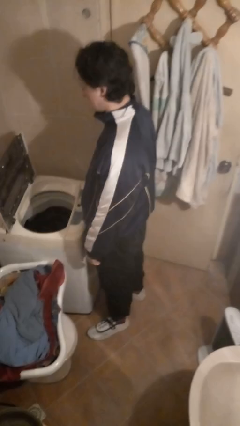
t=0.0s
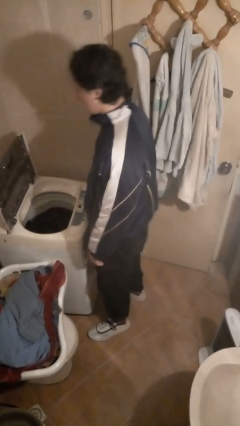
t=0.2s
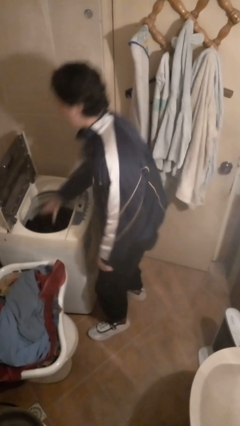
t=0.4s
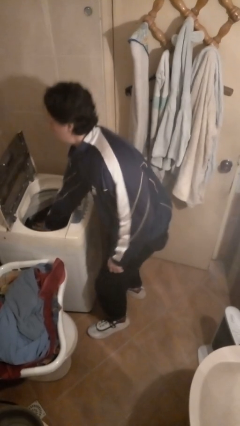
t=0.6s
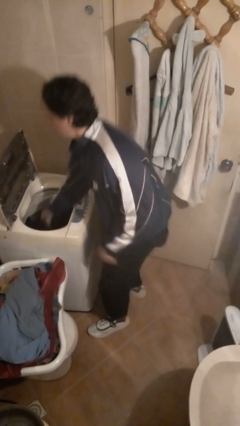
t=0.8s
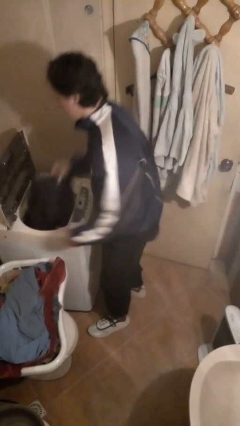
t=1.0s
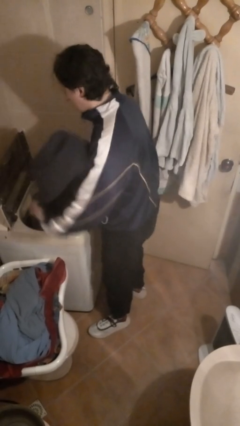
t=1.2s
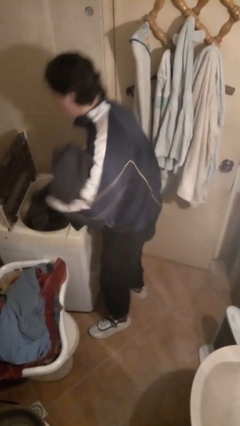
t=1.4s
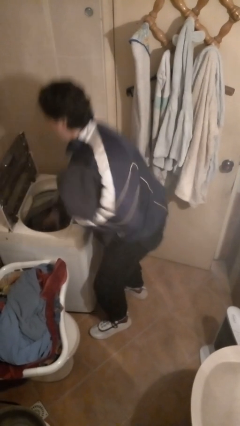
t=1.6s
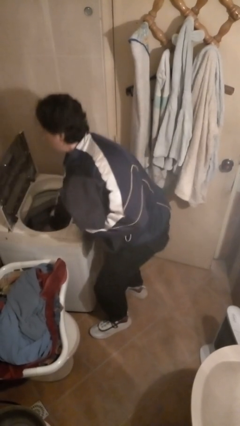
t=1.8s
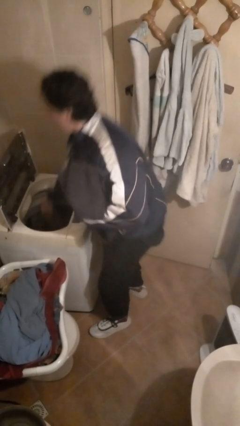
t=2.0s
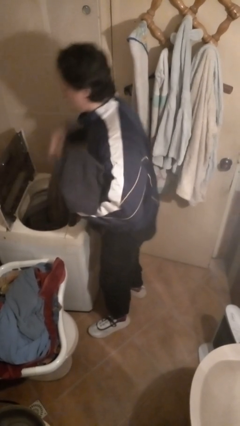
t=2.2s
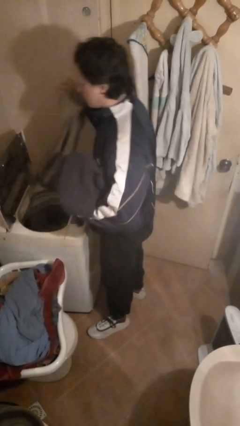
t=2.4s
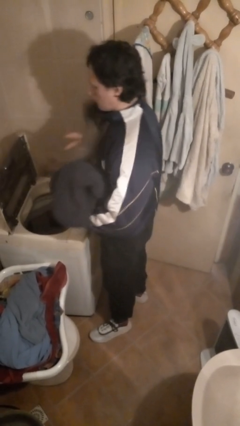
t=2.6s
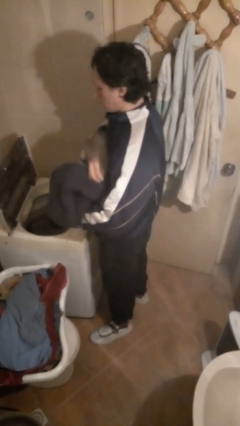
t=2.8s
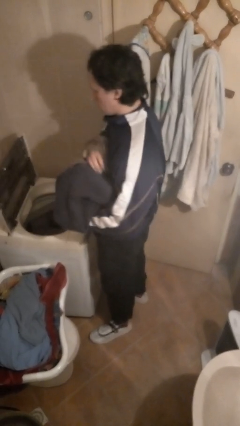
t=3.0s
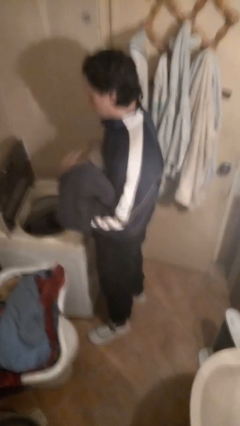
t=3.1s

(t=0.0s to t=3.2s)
person loads clotheswasher

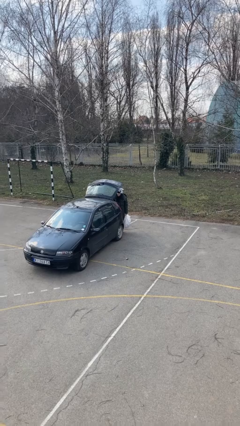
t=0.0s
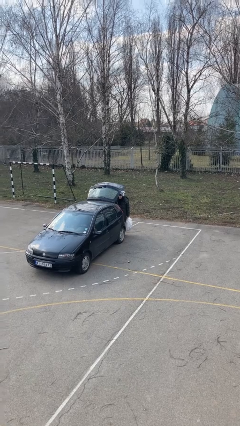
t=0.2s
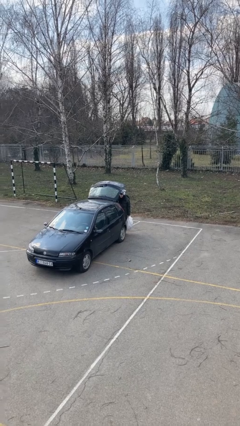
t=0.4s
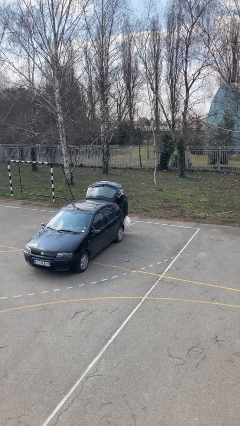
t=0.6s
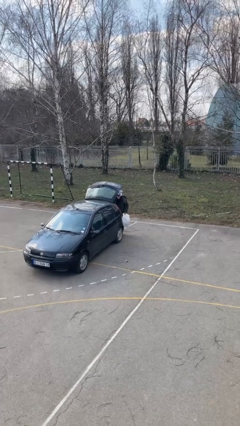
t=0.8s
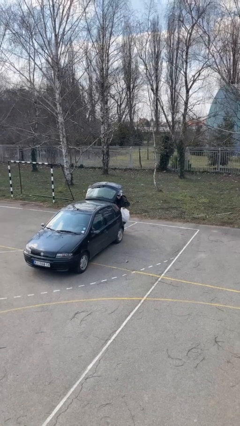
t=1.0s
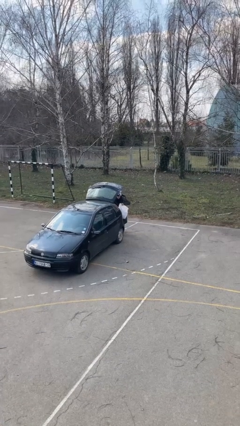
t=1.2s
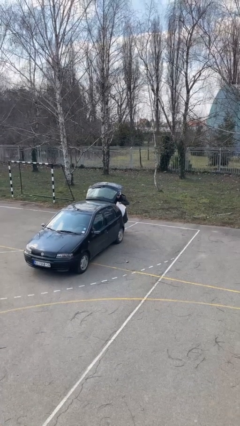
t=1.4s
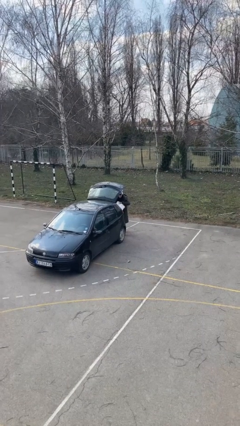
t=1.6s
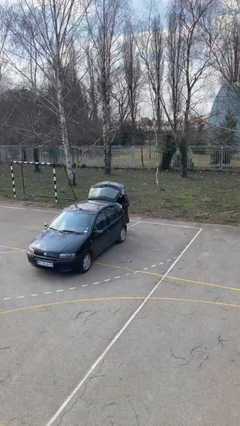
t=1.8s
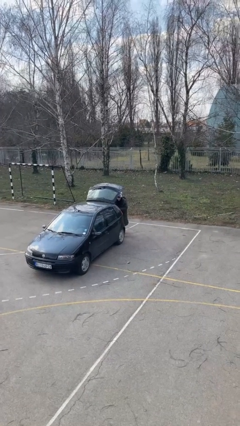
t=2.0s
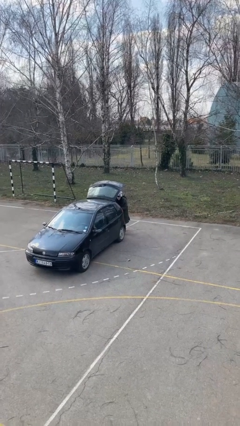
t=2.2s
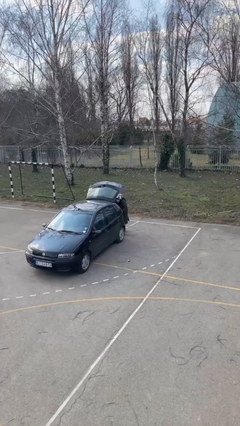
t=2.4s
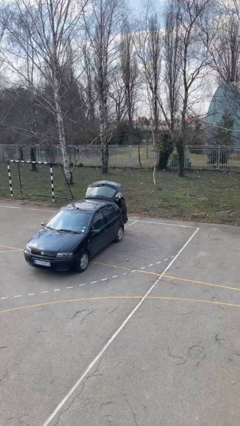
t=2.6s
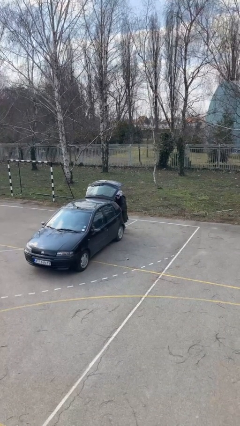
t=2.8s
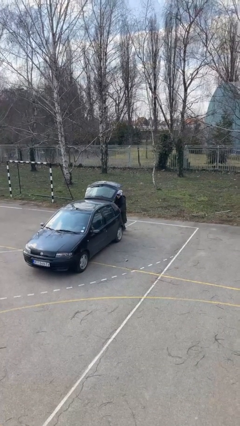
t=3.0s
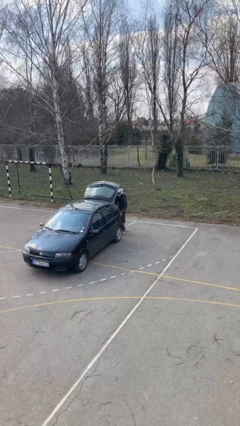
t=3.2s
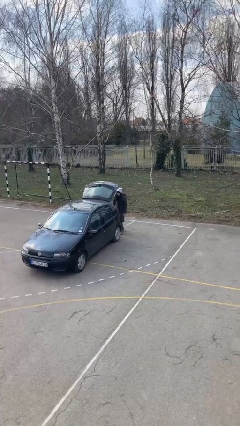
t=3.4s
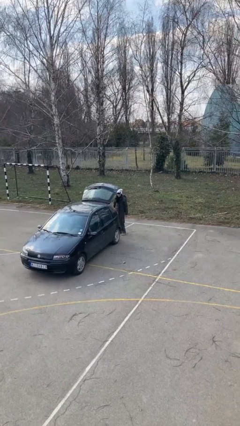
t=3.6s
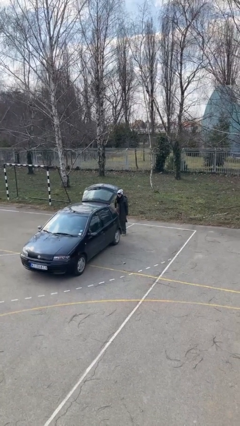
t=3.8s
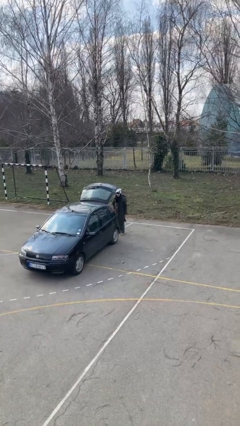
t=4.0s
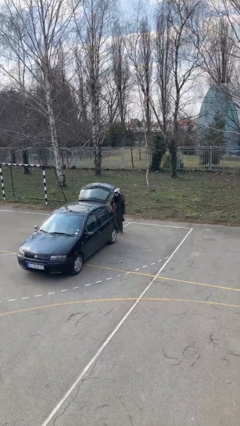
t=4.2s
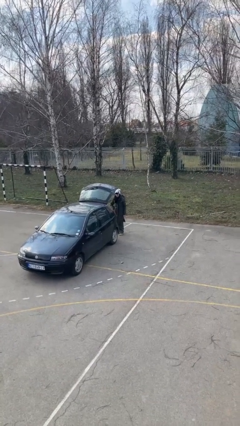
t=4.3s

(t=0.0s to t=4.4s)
person loads car

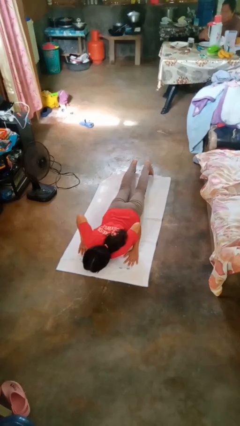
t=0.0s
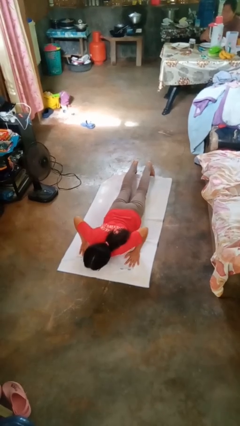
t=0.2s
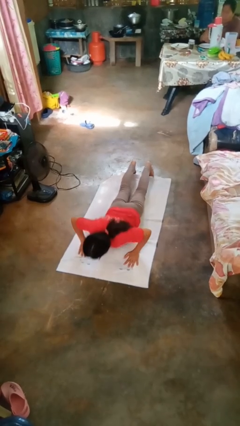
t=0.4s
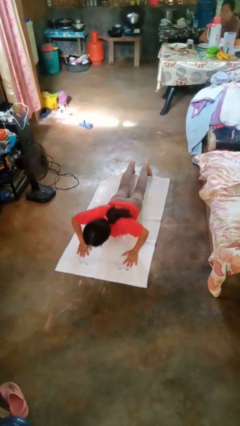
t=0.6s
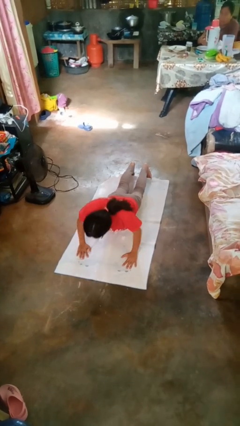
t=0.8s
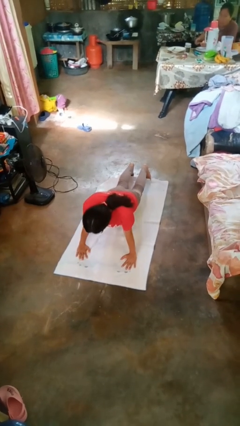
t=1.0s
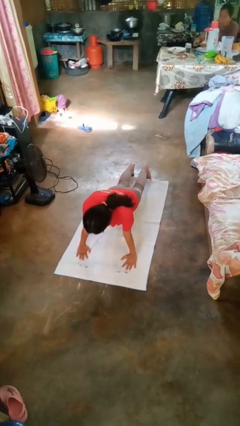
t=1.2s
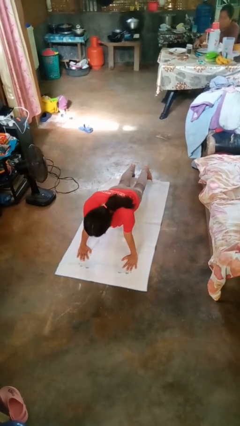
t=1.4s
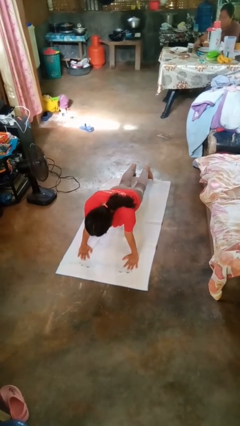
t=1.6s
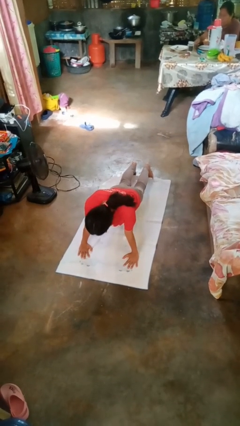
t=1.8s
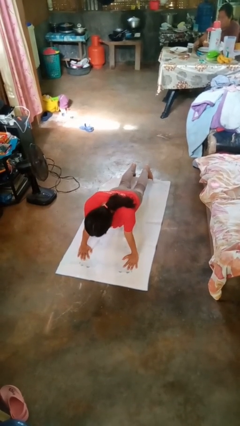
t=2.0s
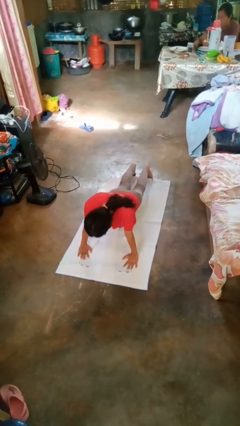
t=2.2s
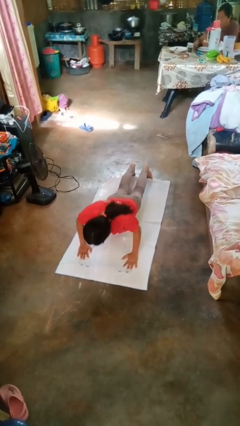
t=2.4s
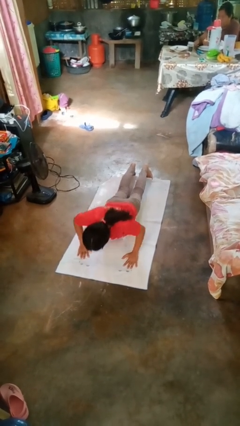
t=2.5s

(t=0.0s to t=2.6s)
person exercises with pushup

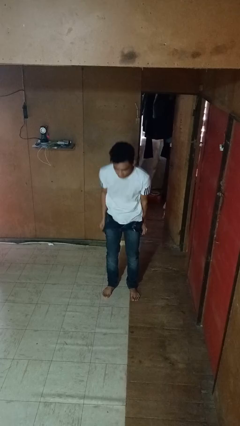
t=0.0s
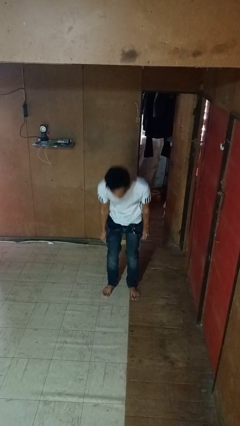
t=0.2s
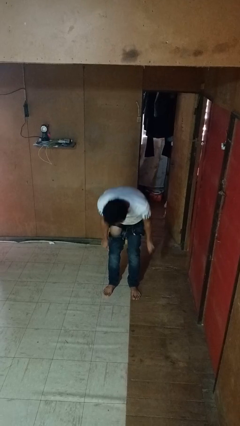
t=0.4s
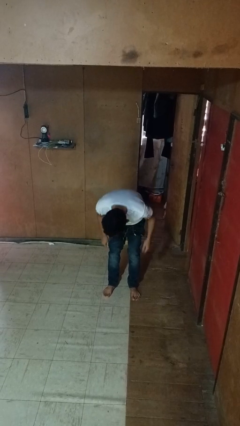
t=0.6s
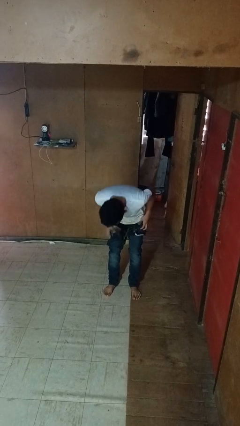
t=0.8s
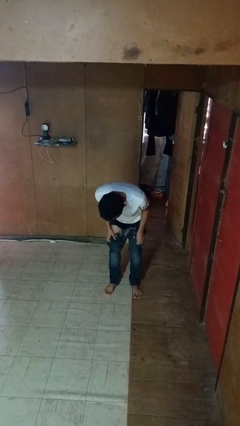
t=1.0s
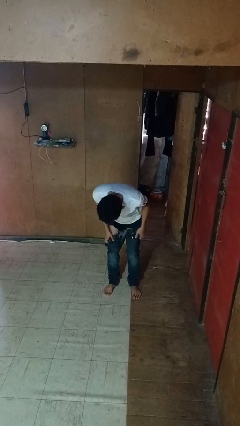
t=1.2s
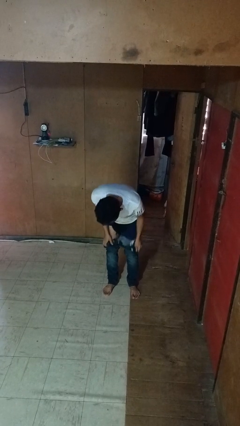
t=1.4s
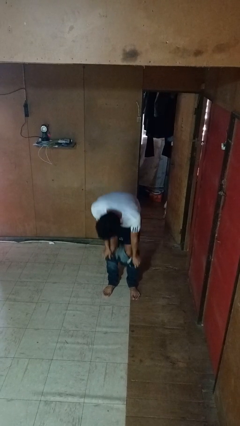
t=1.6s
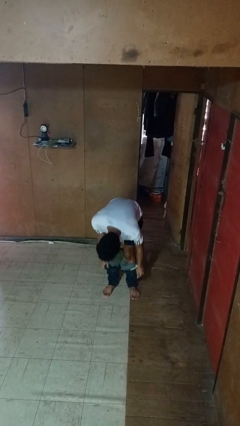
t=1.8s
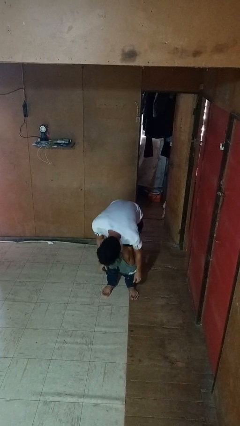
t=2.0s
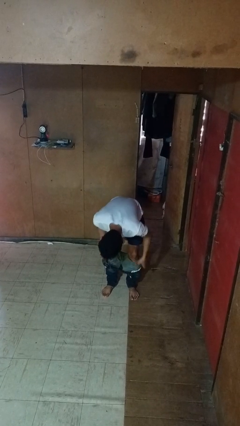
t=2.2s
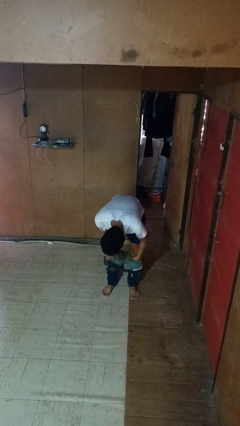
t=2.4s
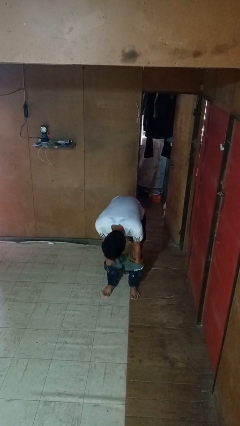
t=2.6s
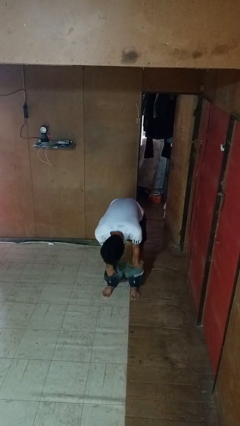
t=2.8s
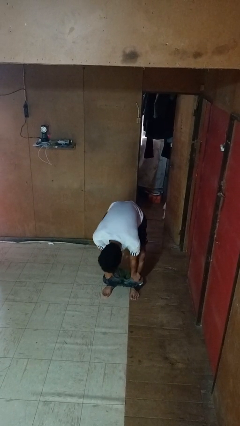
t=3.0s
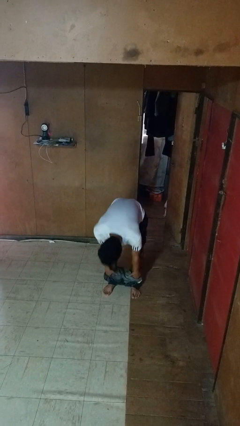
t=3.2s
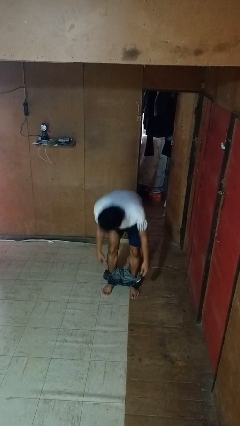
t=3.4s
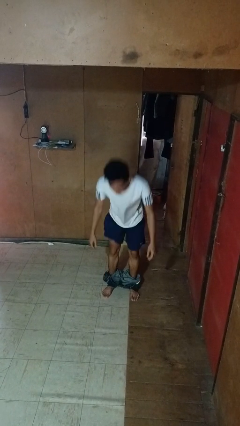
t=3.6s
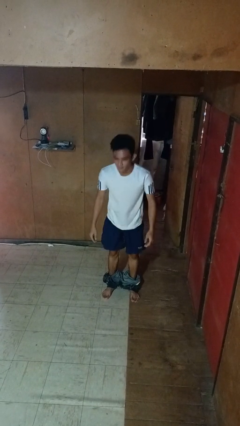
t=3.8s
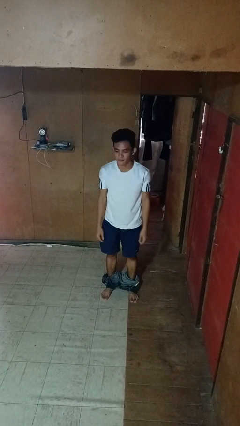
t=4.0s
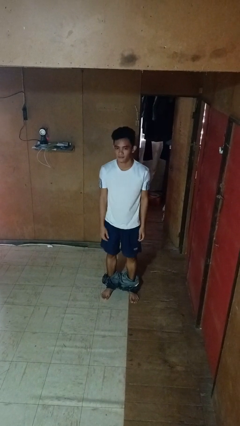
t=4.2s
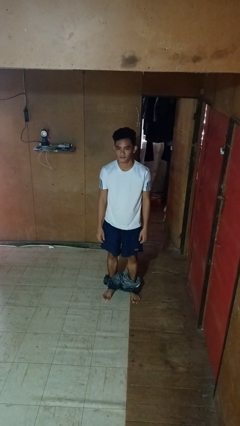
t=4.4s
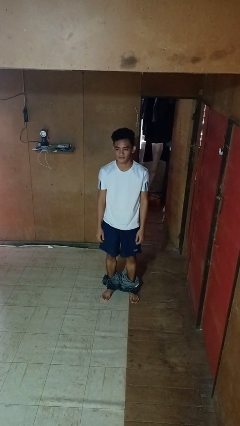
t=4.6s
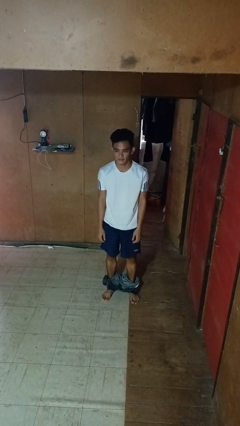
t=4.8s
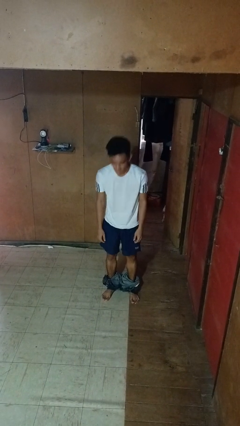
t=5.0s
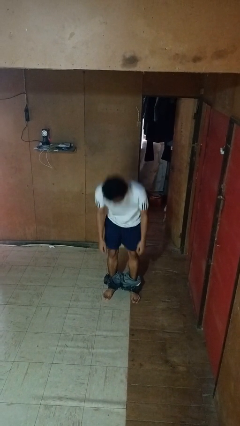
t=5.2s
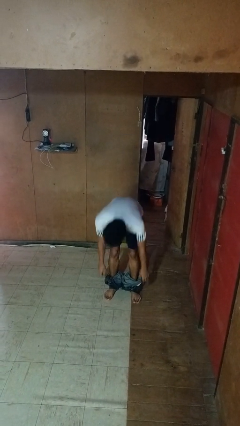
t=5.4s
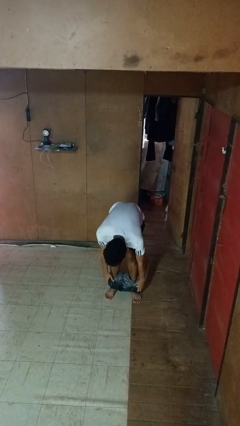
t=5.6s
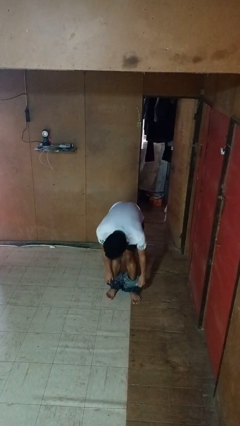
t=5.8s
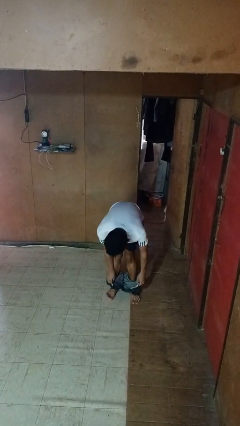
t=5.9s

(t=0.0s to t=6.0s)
person takes off pants

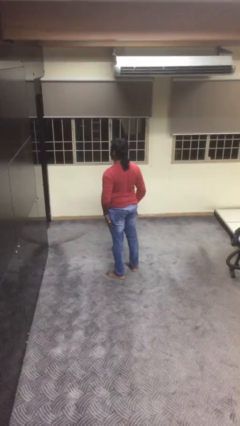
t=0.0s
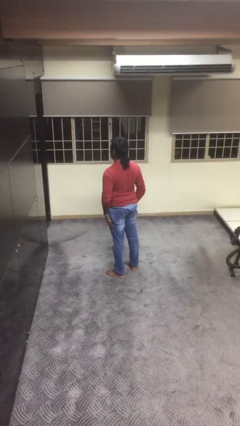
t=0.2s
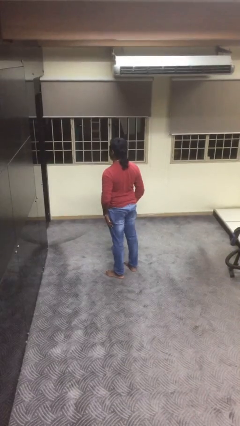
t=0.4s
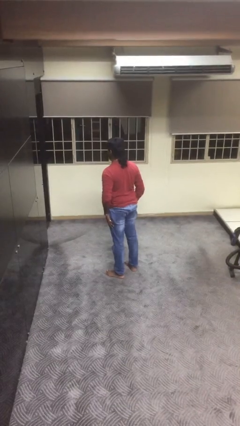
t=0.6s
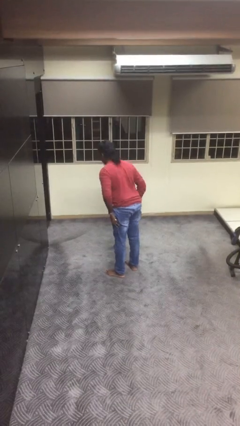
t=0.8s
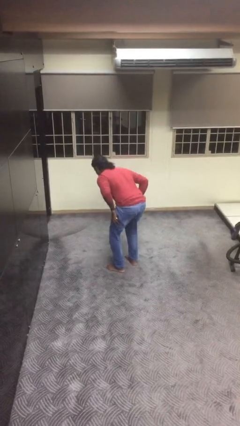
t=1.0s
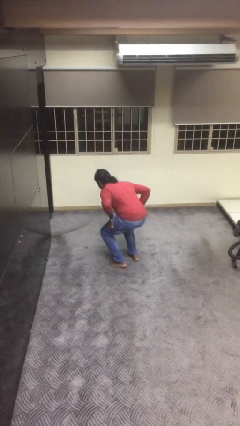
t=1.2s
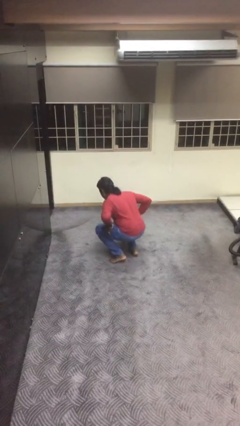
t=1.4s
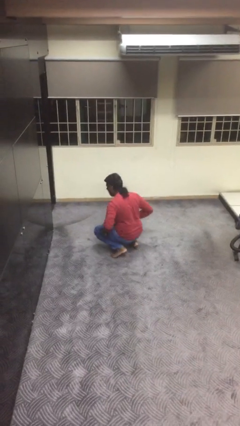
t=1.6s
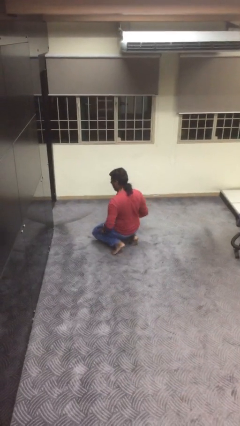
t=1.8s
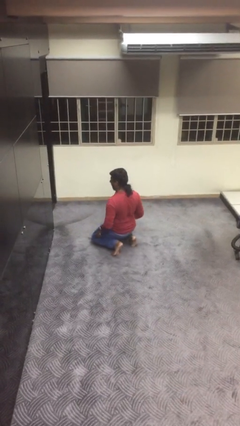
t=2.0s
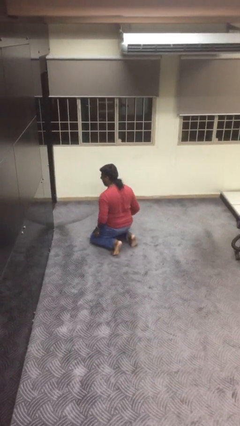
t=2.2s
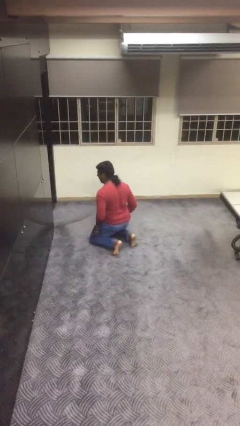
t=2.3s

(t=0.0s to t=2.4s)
person kneels
